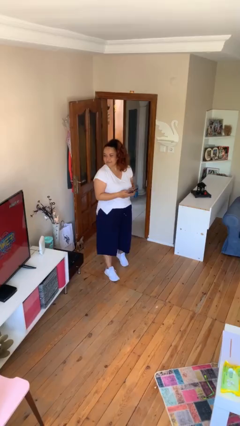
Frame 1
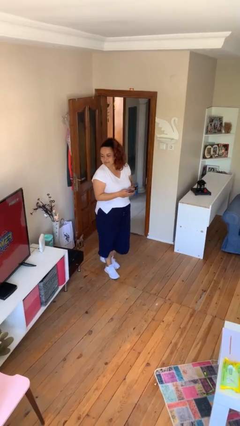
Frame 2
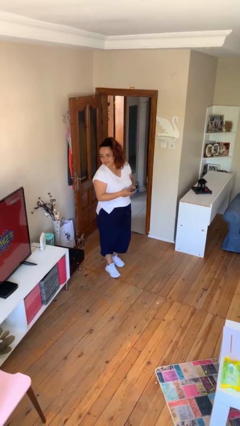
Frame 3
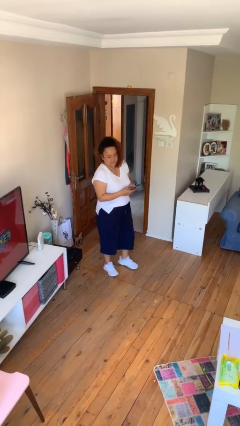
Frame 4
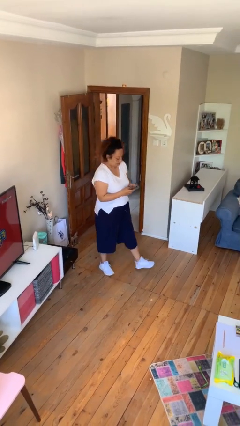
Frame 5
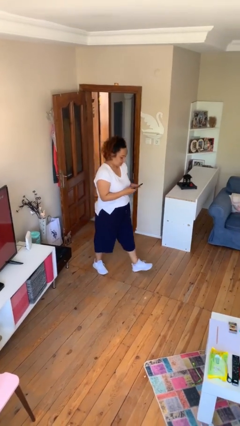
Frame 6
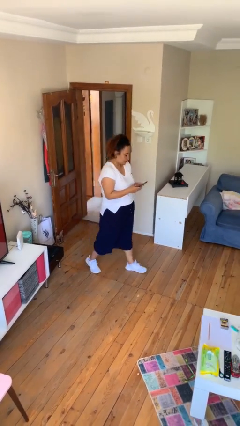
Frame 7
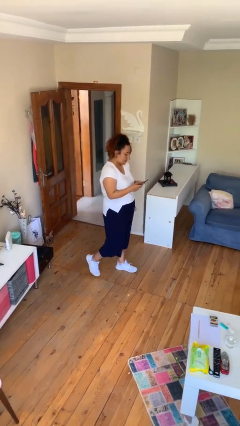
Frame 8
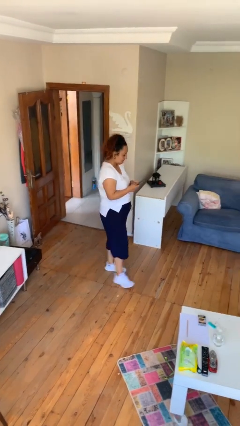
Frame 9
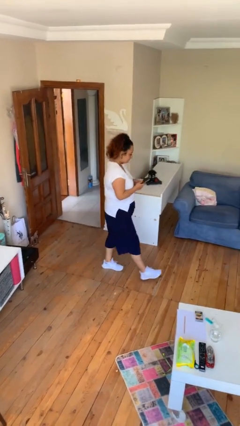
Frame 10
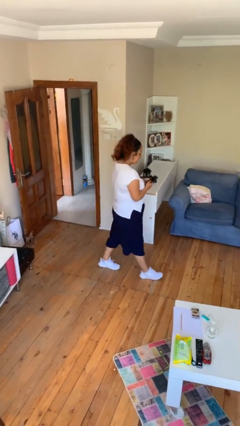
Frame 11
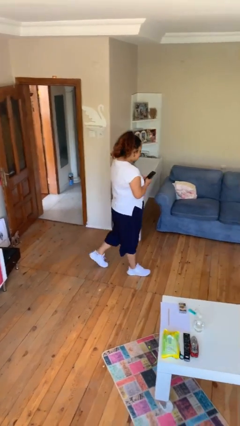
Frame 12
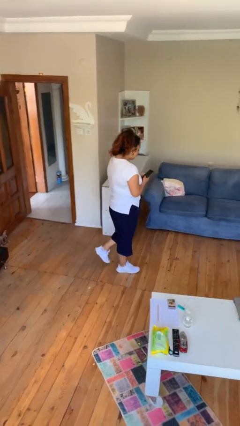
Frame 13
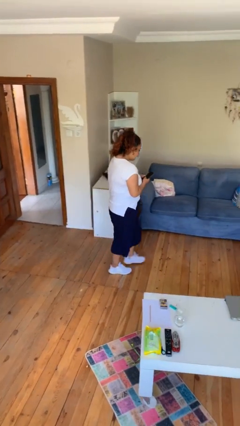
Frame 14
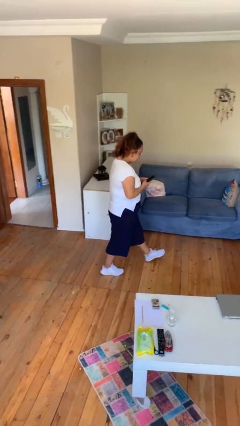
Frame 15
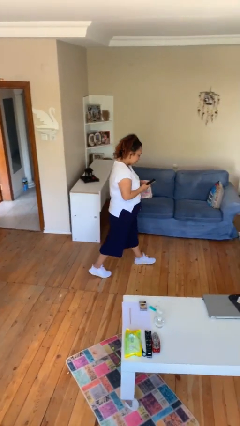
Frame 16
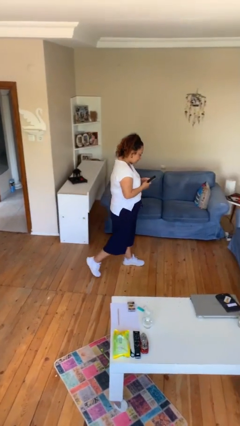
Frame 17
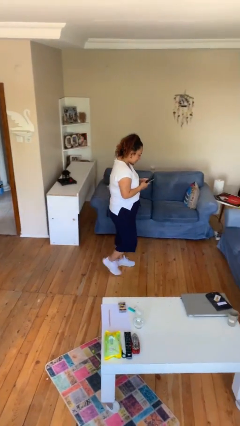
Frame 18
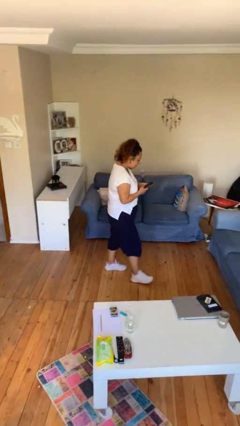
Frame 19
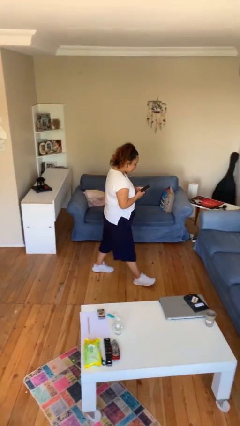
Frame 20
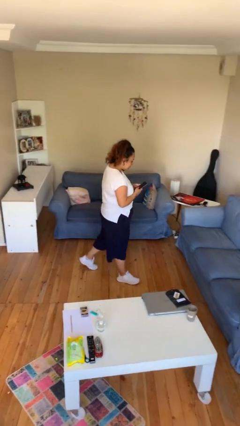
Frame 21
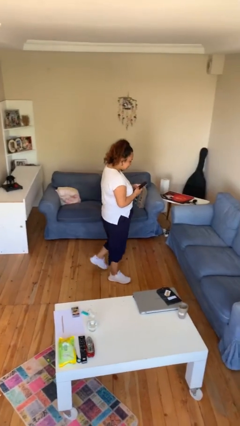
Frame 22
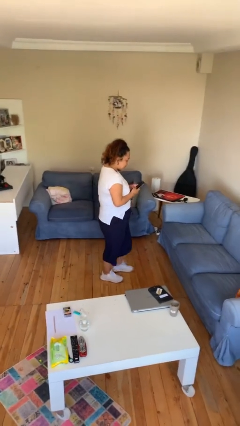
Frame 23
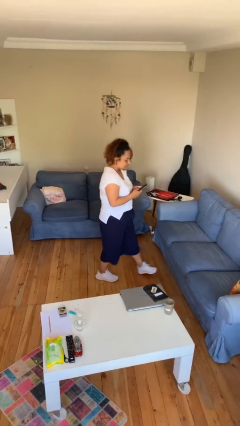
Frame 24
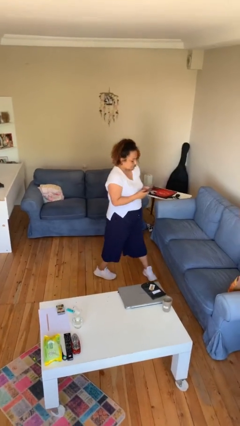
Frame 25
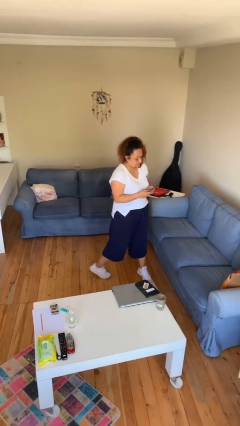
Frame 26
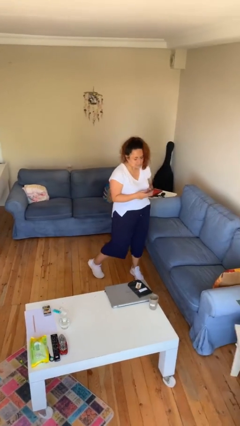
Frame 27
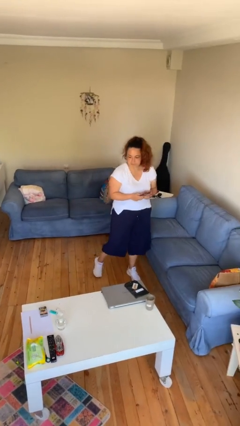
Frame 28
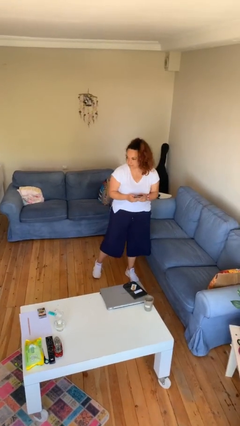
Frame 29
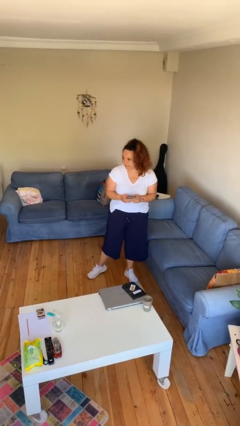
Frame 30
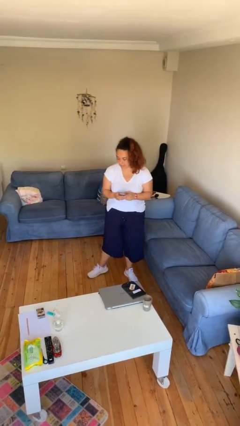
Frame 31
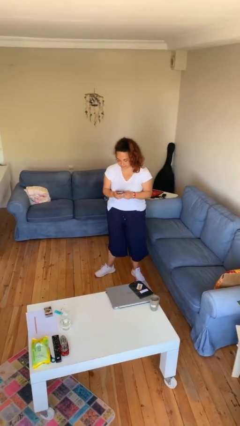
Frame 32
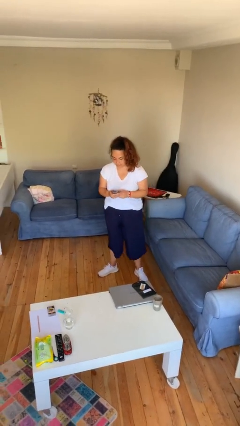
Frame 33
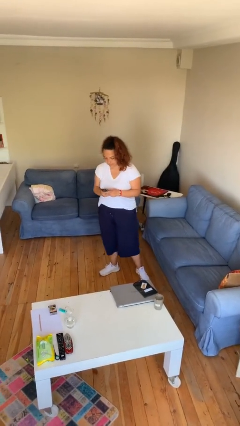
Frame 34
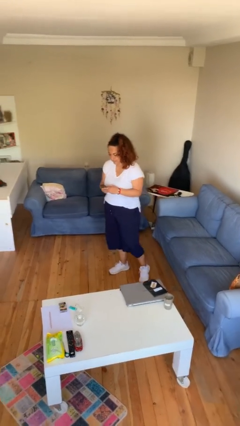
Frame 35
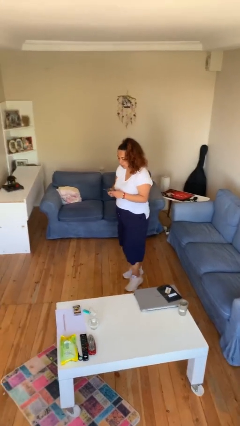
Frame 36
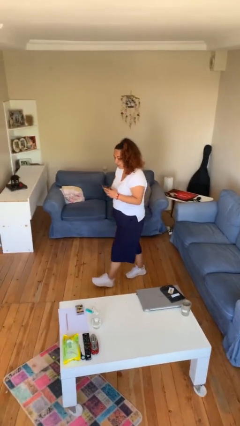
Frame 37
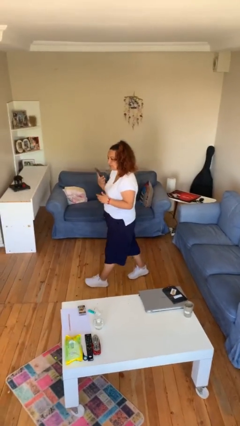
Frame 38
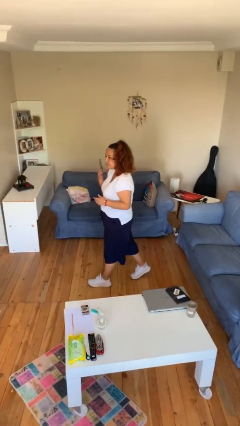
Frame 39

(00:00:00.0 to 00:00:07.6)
person texts on phone

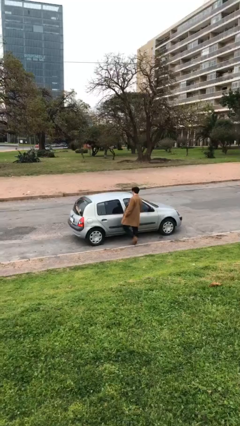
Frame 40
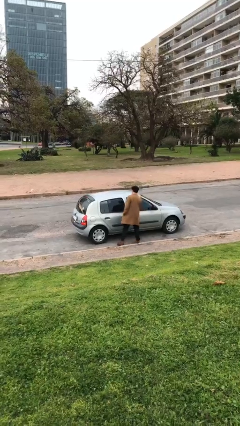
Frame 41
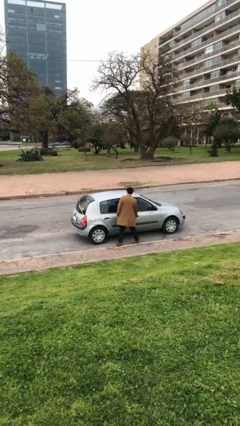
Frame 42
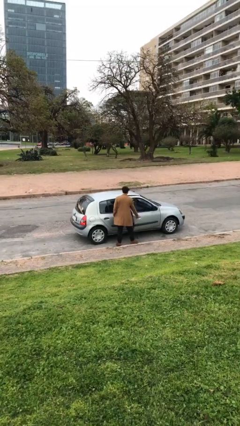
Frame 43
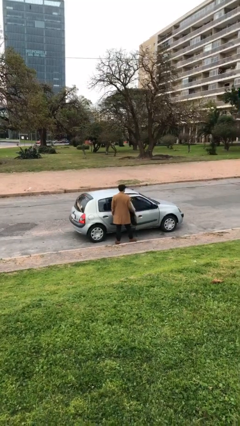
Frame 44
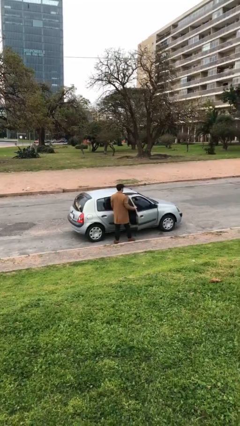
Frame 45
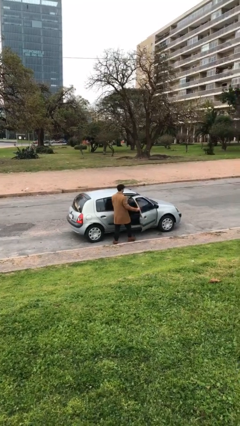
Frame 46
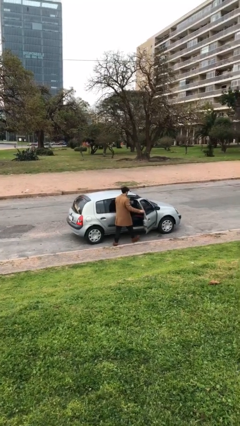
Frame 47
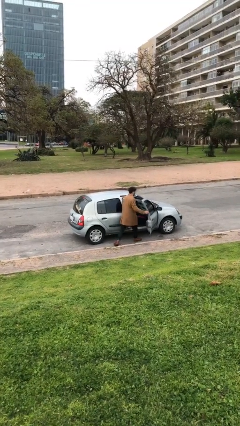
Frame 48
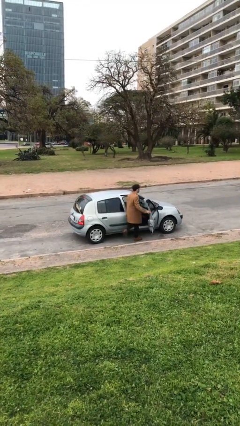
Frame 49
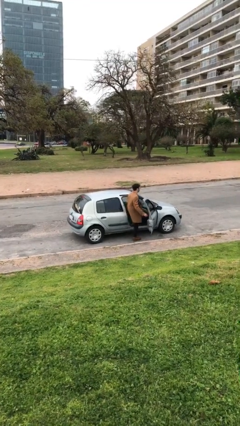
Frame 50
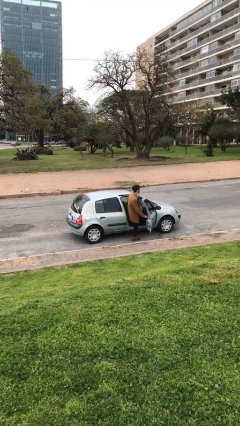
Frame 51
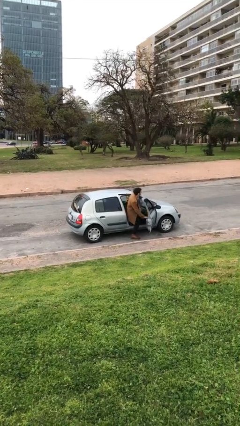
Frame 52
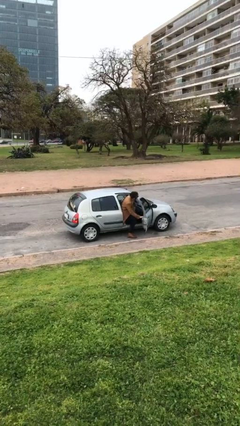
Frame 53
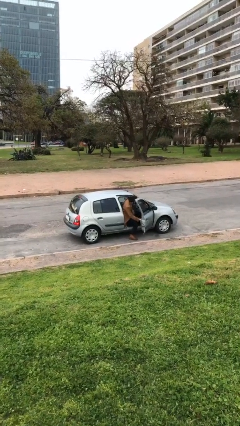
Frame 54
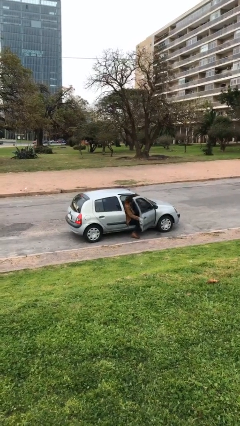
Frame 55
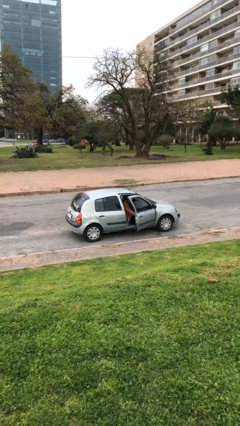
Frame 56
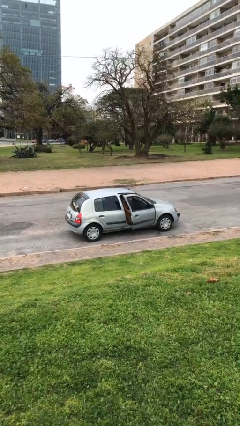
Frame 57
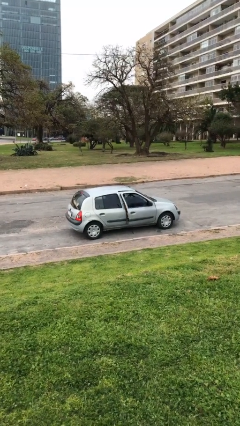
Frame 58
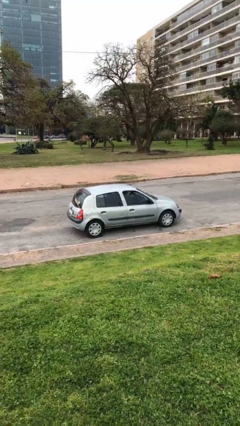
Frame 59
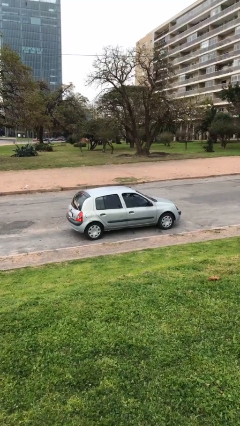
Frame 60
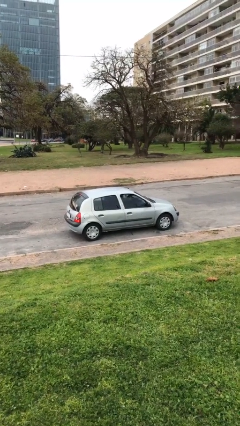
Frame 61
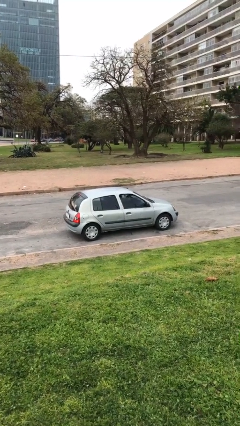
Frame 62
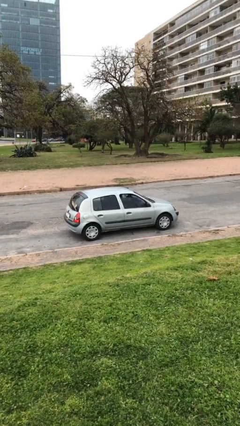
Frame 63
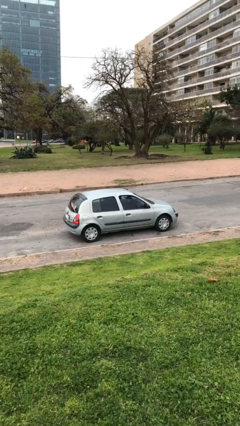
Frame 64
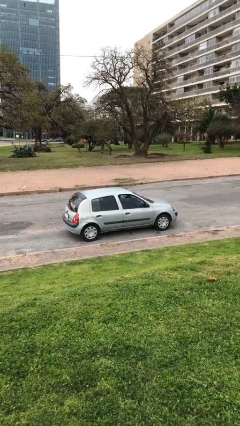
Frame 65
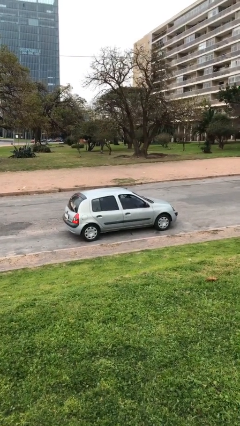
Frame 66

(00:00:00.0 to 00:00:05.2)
car picks up person

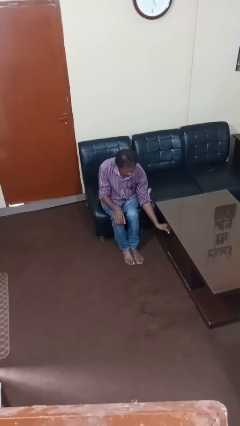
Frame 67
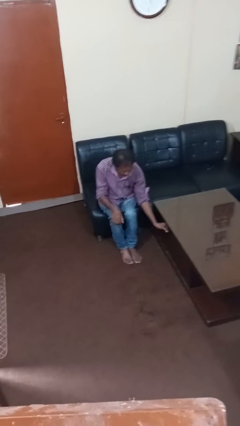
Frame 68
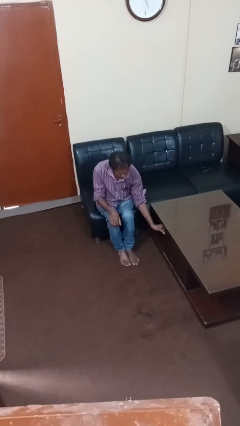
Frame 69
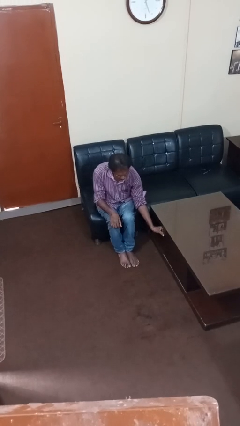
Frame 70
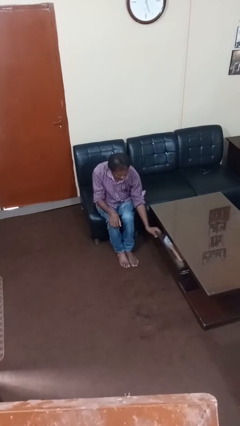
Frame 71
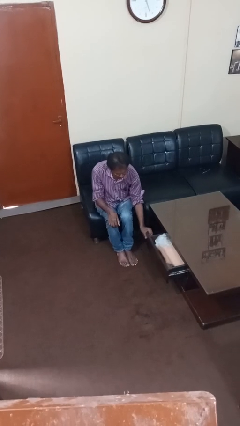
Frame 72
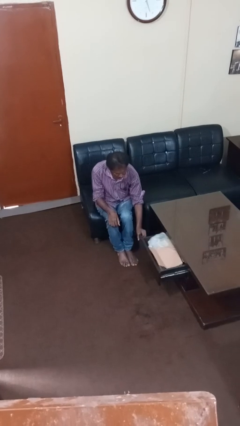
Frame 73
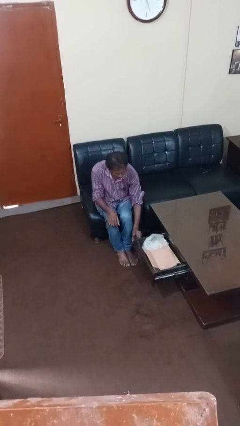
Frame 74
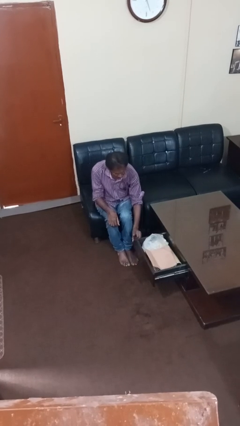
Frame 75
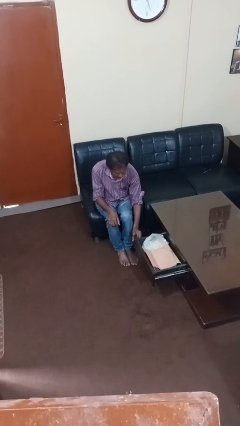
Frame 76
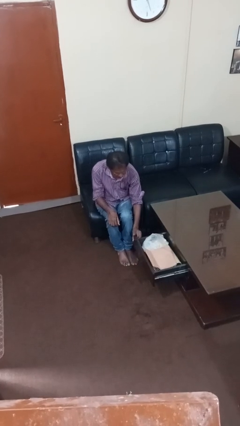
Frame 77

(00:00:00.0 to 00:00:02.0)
person opens dresser drawer

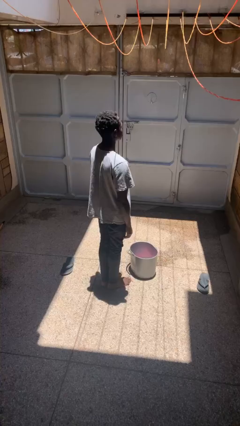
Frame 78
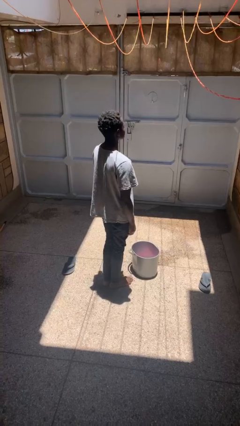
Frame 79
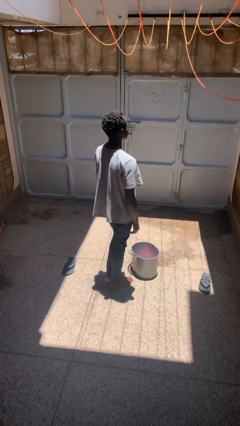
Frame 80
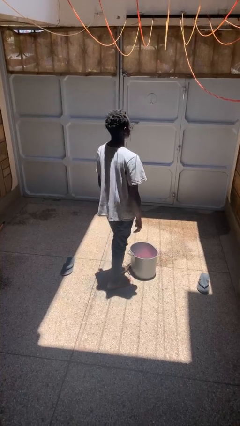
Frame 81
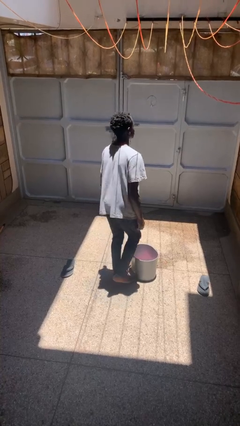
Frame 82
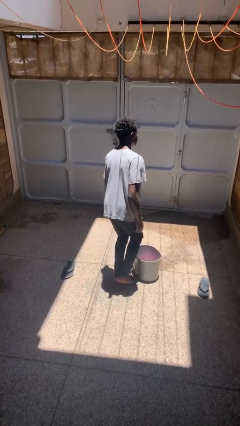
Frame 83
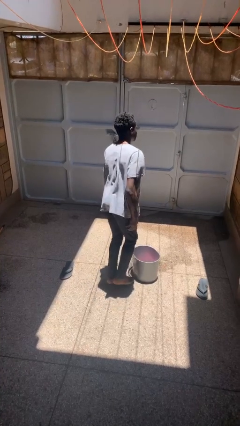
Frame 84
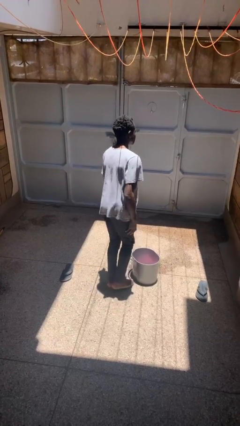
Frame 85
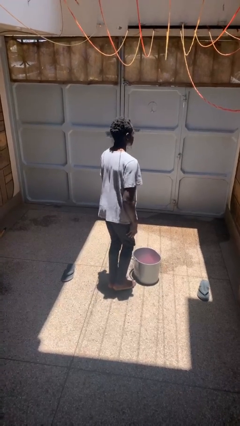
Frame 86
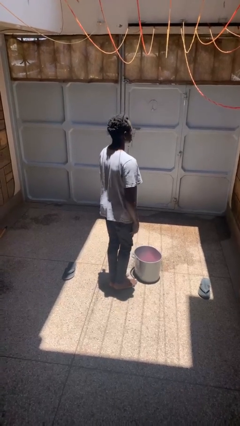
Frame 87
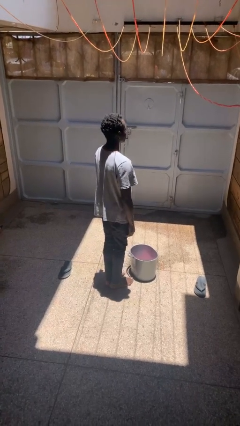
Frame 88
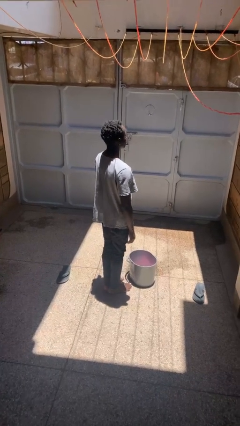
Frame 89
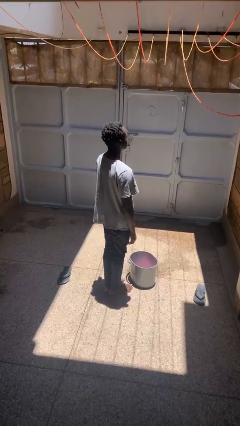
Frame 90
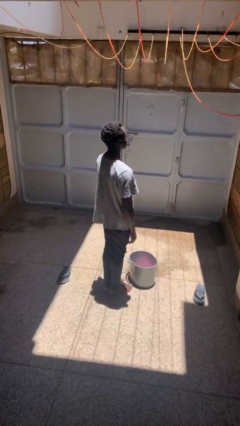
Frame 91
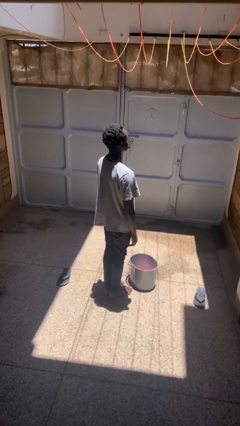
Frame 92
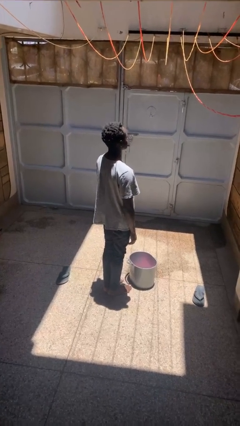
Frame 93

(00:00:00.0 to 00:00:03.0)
person touches earlobe
